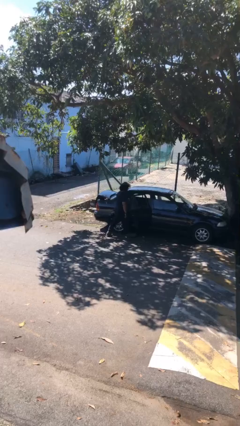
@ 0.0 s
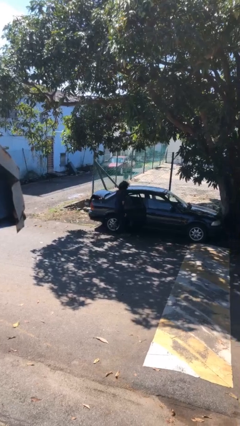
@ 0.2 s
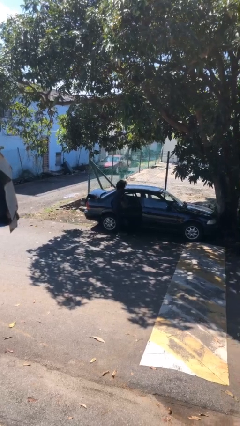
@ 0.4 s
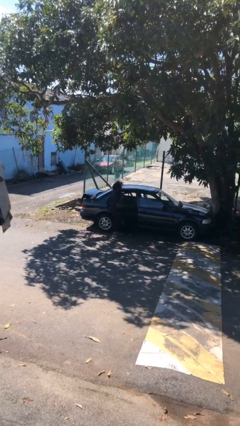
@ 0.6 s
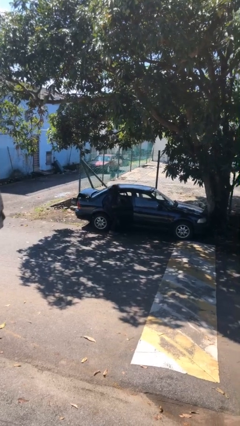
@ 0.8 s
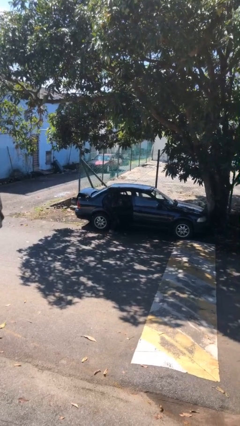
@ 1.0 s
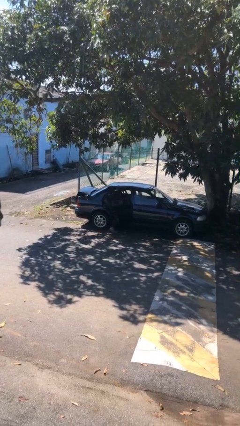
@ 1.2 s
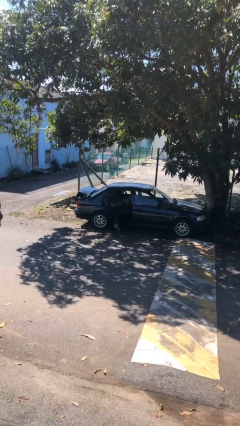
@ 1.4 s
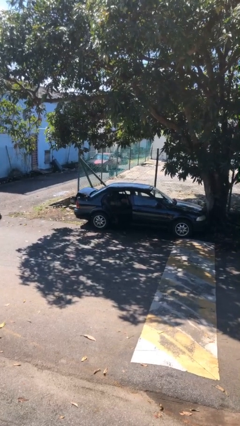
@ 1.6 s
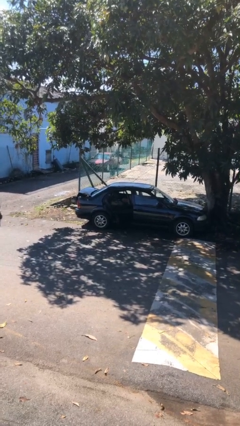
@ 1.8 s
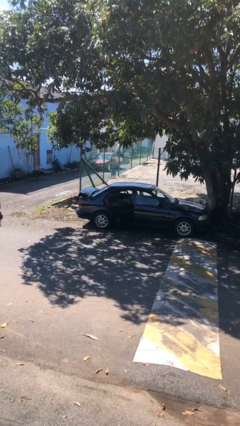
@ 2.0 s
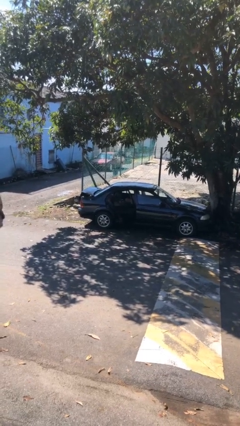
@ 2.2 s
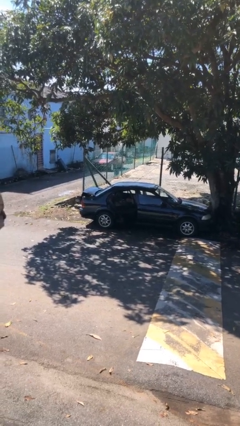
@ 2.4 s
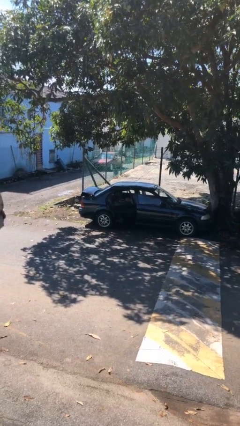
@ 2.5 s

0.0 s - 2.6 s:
person enters car

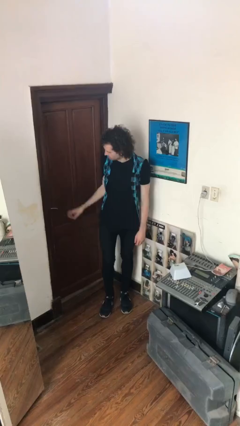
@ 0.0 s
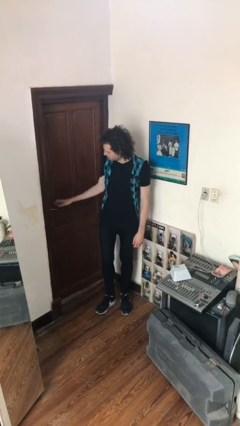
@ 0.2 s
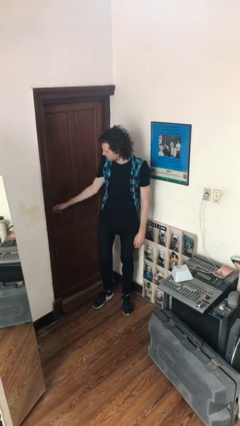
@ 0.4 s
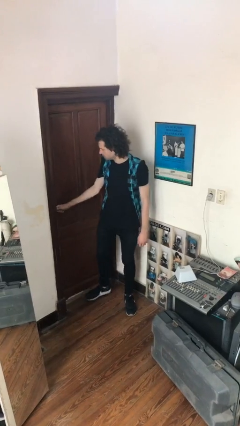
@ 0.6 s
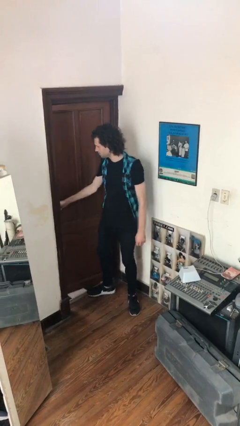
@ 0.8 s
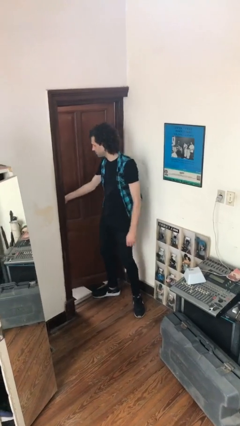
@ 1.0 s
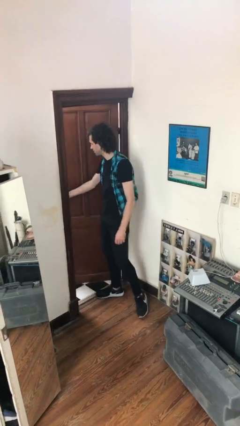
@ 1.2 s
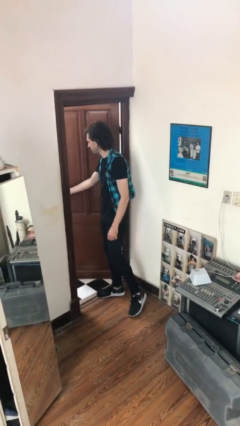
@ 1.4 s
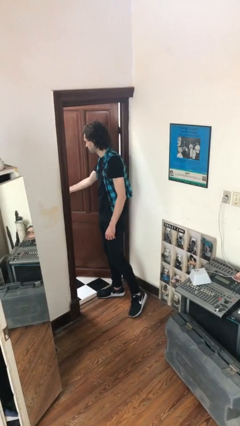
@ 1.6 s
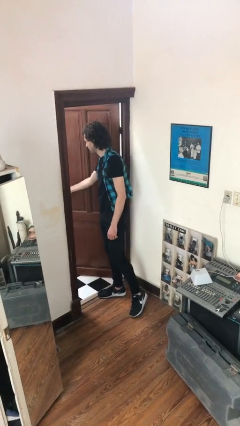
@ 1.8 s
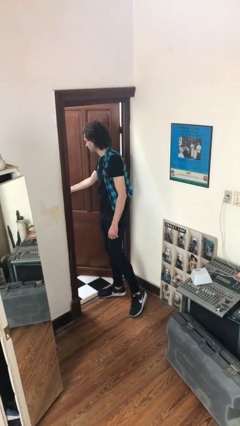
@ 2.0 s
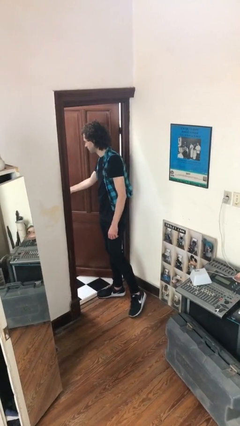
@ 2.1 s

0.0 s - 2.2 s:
person opens facility door

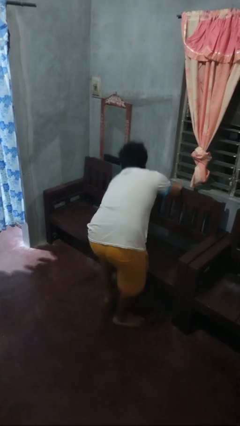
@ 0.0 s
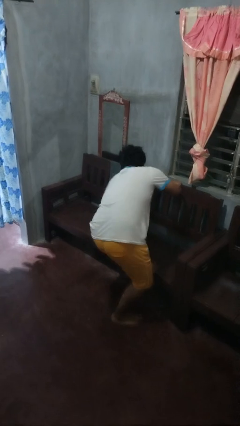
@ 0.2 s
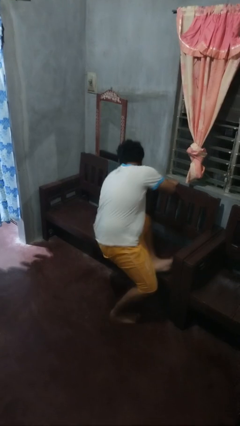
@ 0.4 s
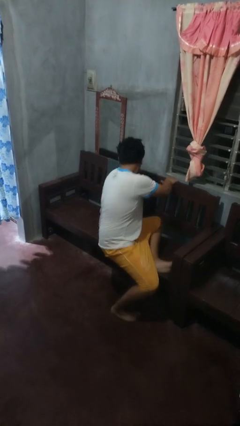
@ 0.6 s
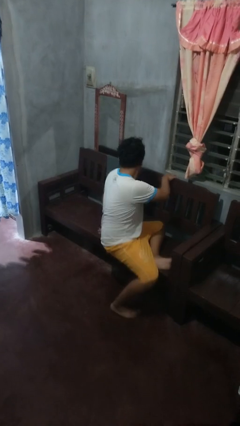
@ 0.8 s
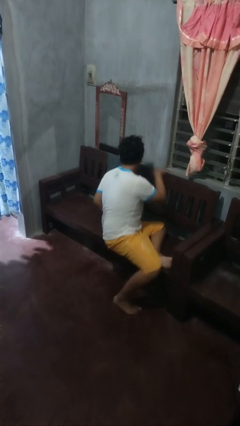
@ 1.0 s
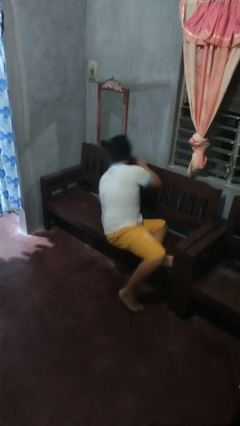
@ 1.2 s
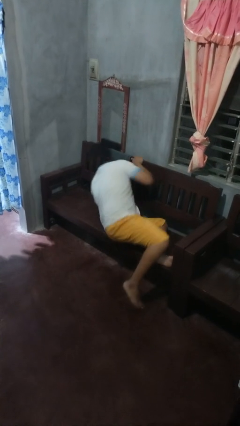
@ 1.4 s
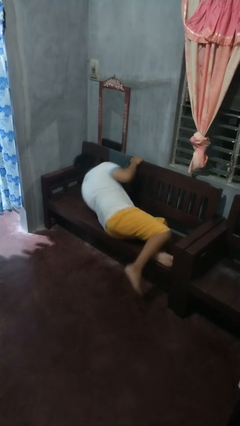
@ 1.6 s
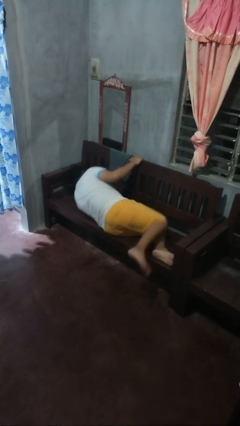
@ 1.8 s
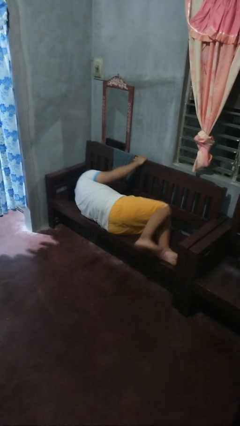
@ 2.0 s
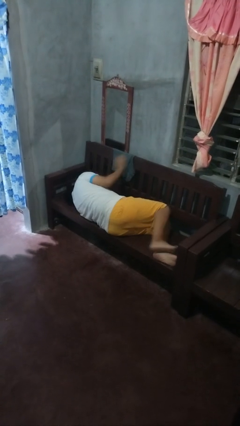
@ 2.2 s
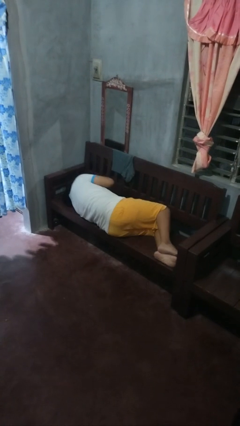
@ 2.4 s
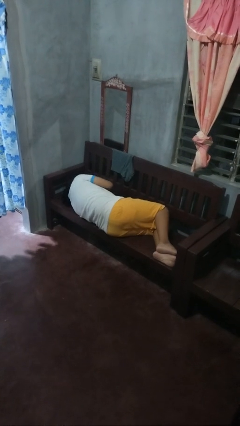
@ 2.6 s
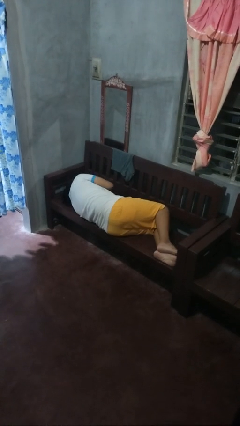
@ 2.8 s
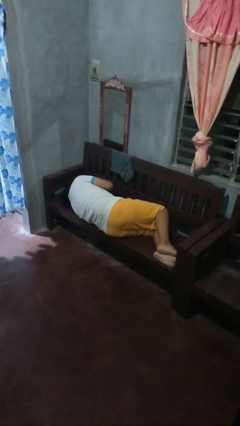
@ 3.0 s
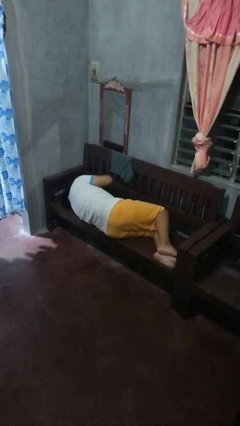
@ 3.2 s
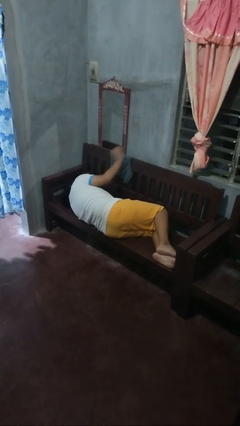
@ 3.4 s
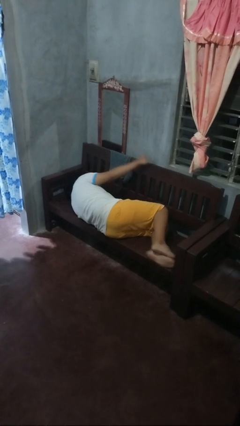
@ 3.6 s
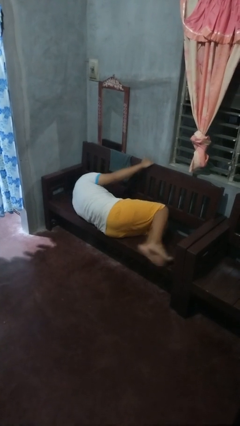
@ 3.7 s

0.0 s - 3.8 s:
person lies down on couch

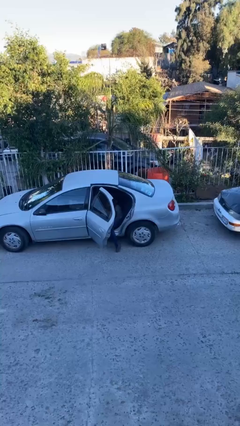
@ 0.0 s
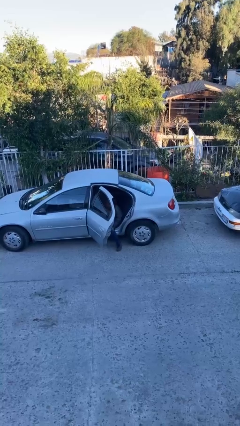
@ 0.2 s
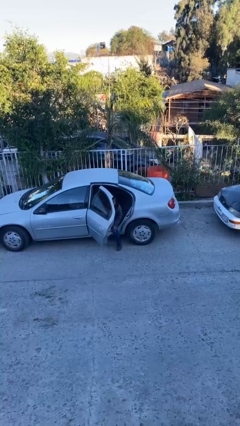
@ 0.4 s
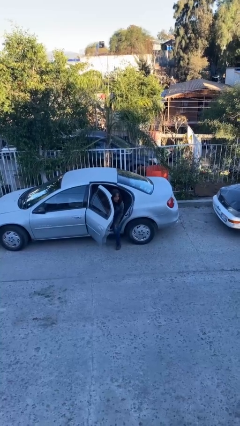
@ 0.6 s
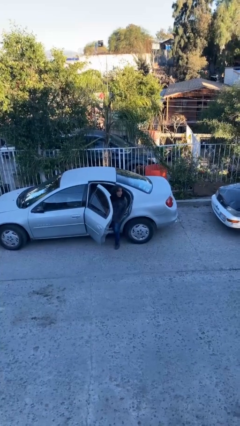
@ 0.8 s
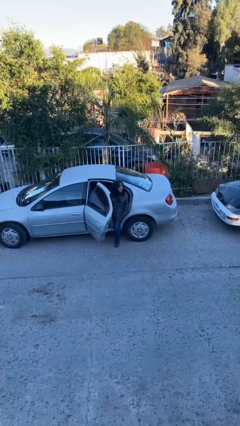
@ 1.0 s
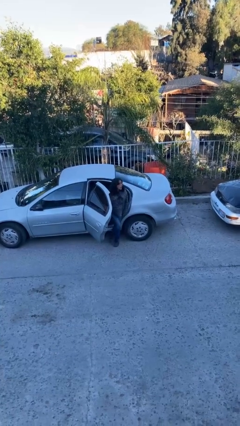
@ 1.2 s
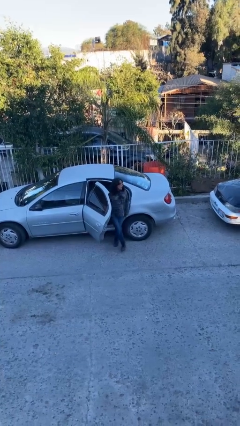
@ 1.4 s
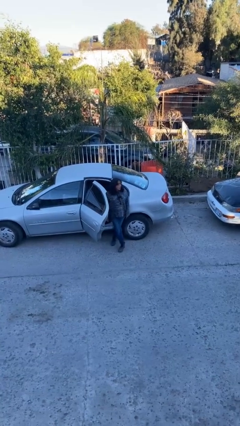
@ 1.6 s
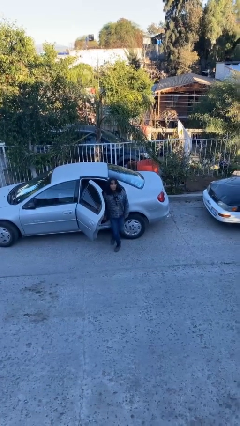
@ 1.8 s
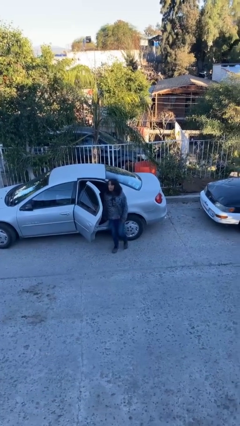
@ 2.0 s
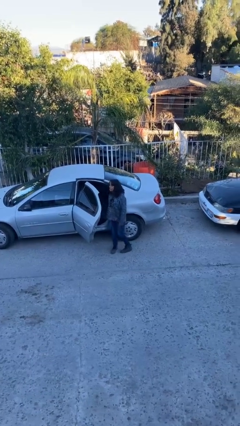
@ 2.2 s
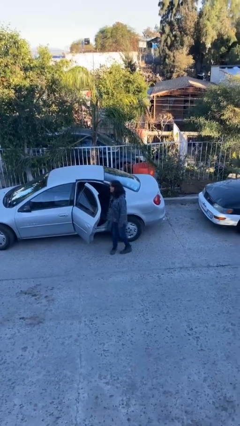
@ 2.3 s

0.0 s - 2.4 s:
person exits car

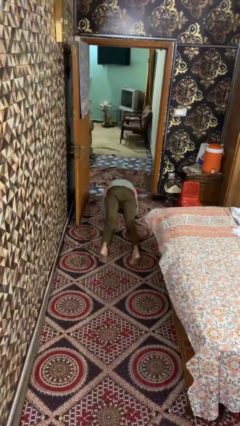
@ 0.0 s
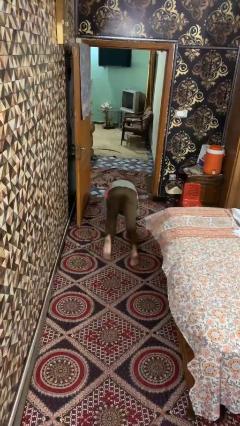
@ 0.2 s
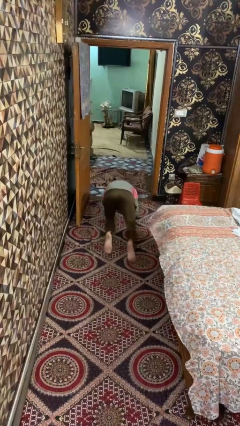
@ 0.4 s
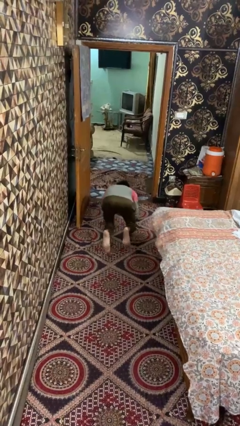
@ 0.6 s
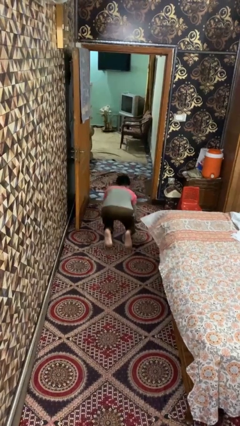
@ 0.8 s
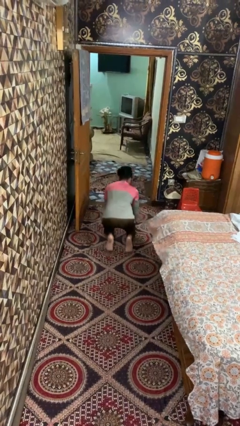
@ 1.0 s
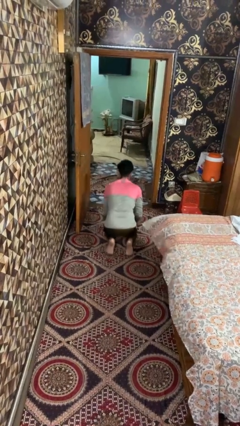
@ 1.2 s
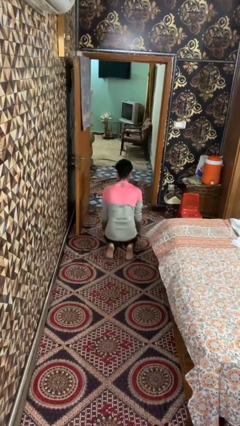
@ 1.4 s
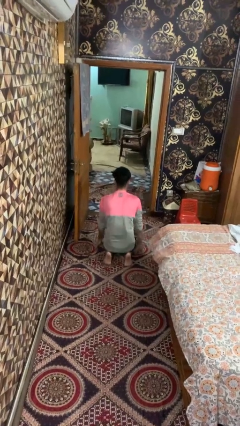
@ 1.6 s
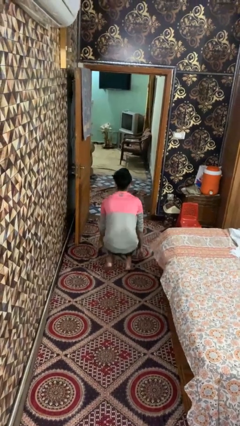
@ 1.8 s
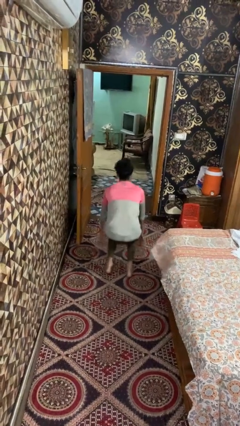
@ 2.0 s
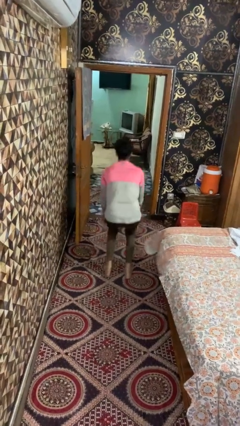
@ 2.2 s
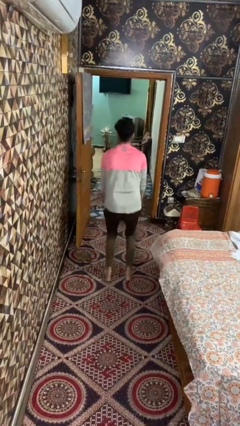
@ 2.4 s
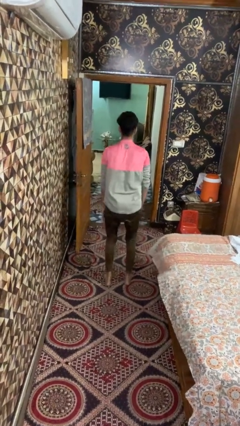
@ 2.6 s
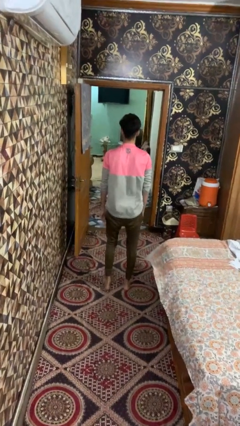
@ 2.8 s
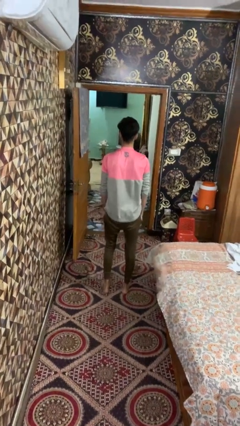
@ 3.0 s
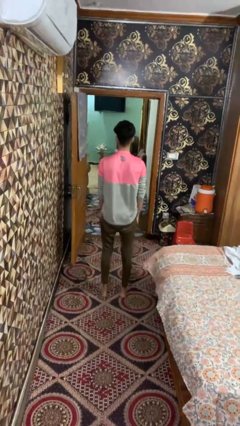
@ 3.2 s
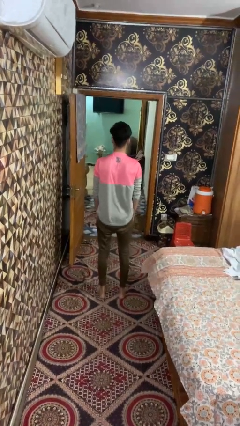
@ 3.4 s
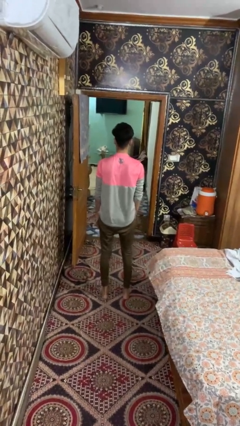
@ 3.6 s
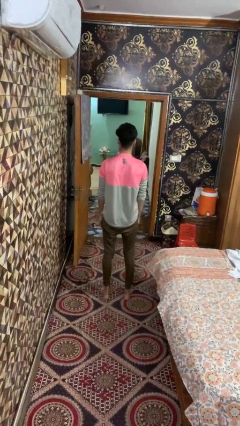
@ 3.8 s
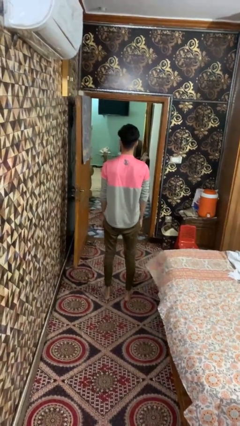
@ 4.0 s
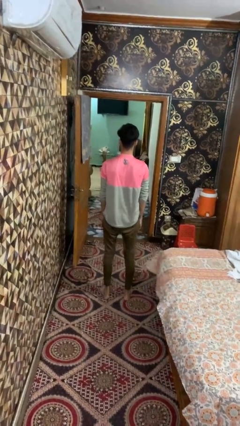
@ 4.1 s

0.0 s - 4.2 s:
person stands up from floor

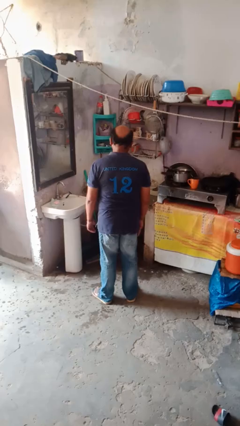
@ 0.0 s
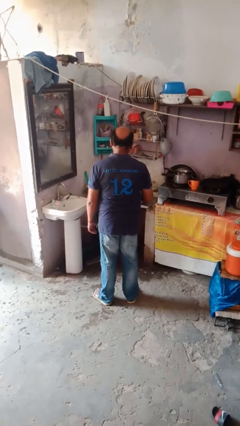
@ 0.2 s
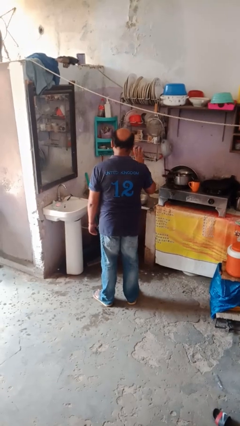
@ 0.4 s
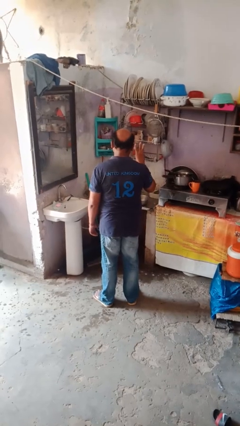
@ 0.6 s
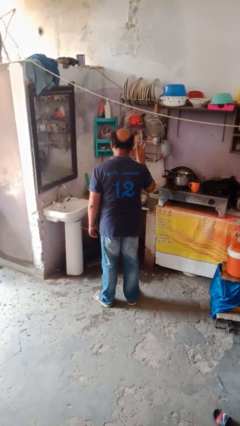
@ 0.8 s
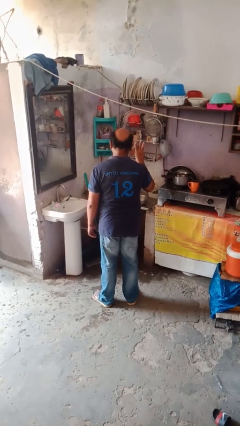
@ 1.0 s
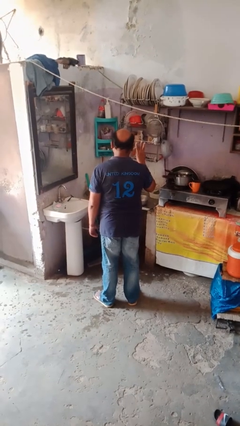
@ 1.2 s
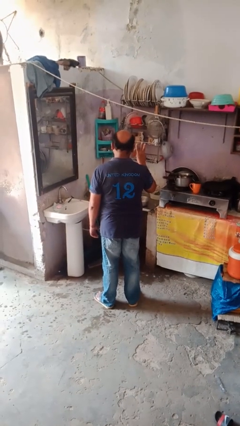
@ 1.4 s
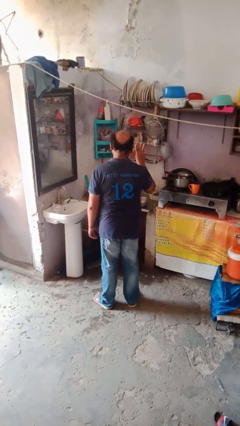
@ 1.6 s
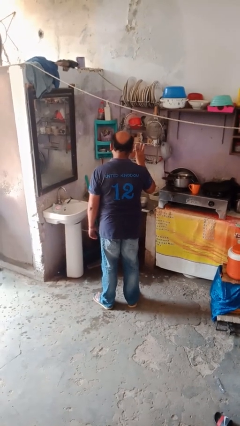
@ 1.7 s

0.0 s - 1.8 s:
person gestures number three
